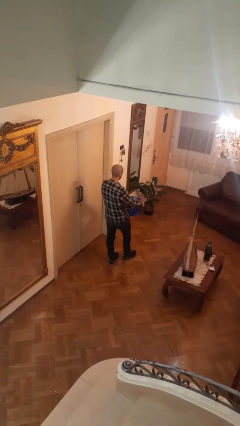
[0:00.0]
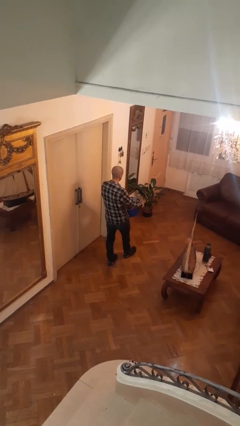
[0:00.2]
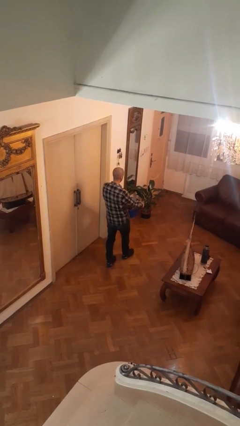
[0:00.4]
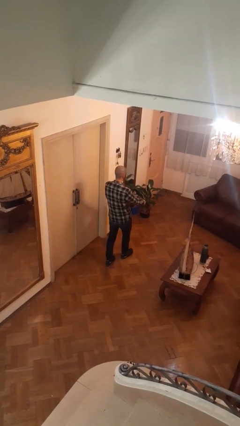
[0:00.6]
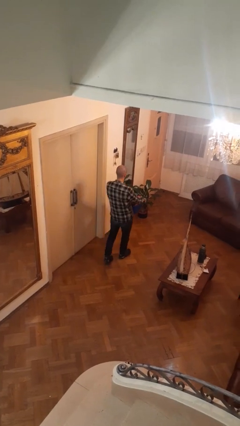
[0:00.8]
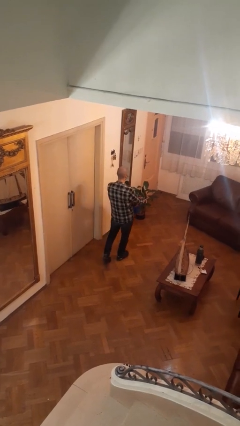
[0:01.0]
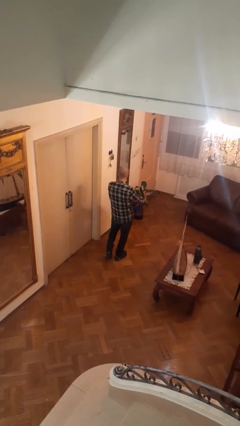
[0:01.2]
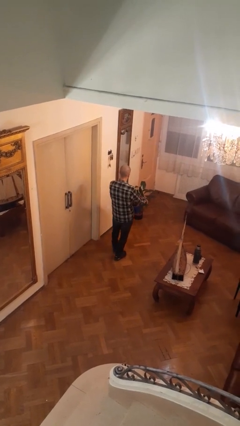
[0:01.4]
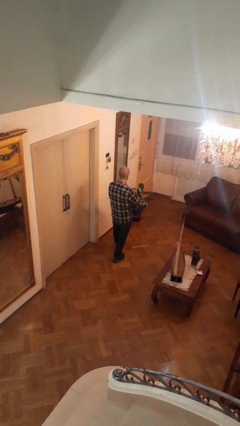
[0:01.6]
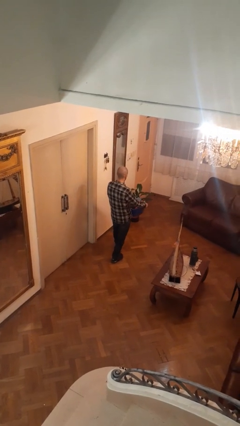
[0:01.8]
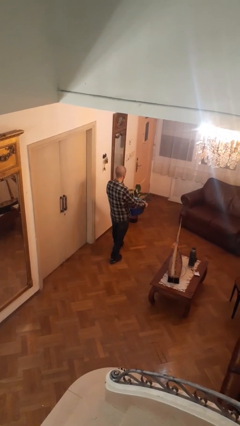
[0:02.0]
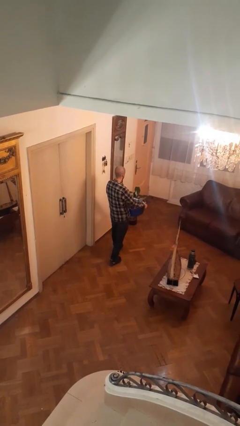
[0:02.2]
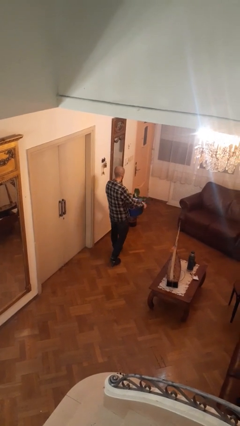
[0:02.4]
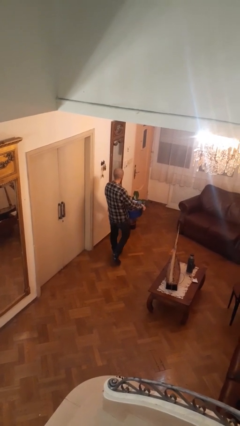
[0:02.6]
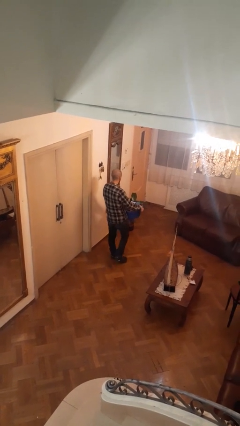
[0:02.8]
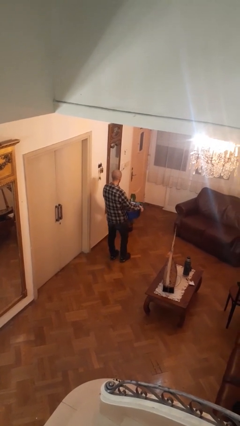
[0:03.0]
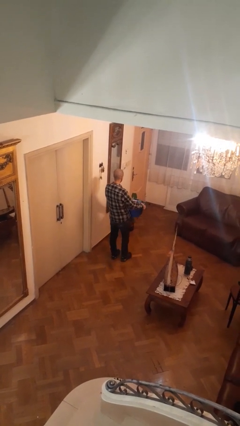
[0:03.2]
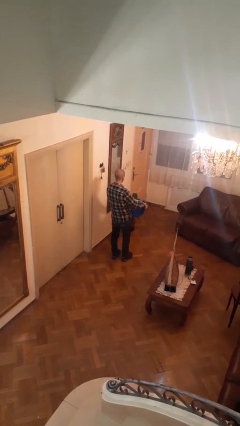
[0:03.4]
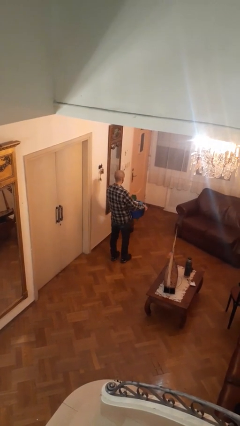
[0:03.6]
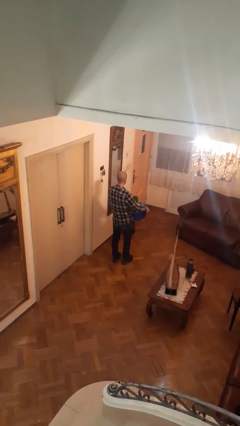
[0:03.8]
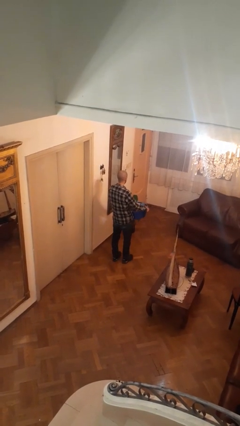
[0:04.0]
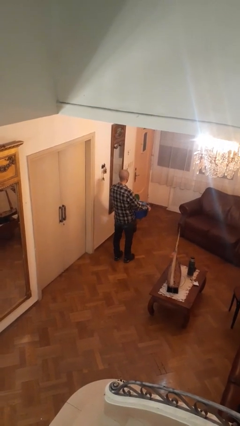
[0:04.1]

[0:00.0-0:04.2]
person carries laundry basket

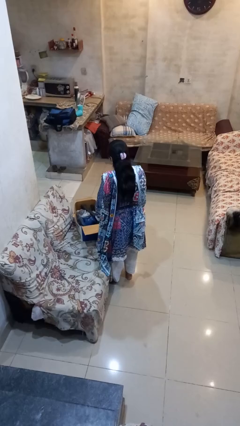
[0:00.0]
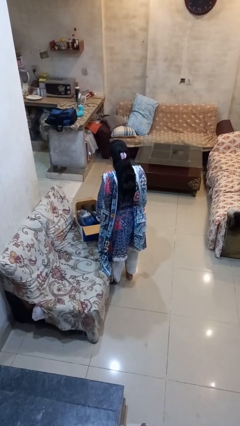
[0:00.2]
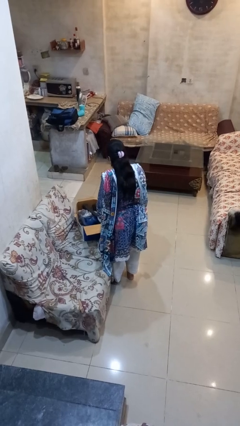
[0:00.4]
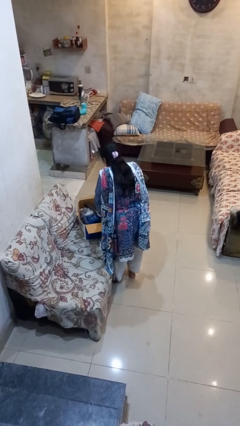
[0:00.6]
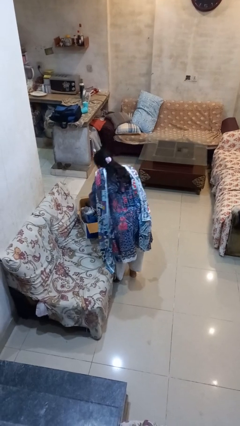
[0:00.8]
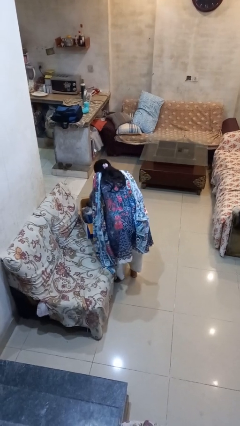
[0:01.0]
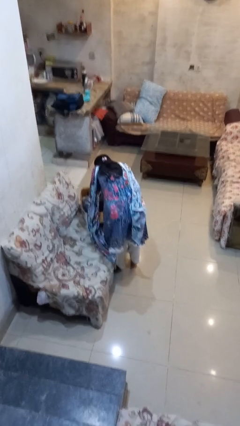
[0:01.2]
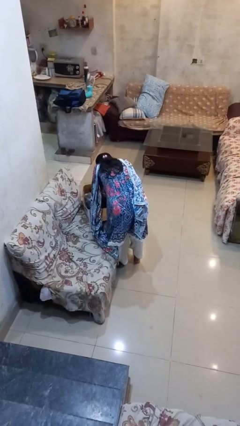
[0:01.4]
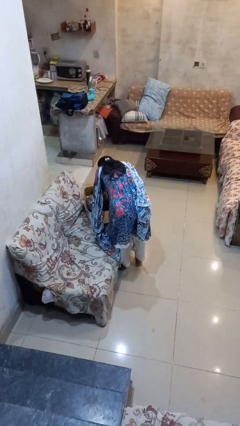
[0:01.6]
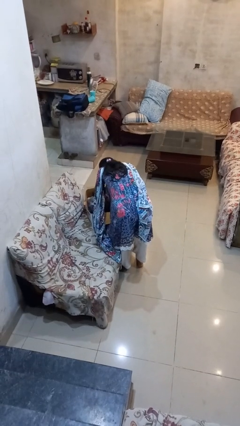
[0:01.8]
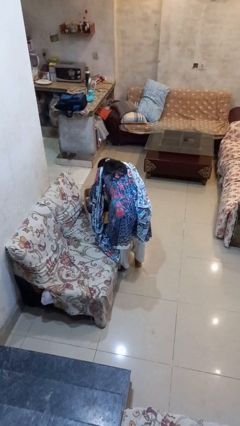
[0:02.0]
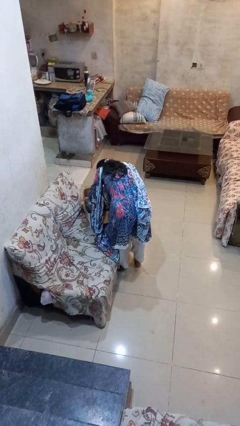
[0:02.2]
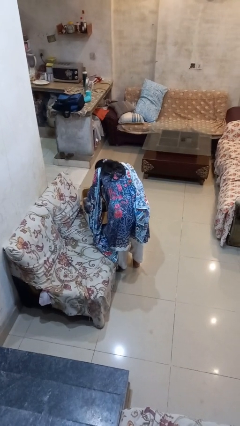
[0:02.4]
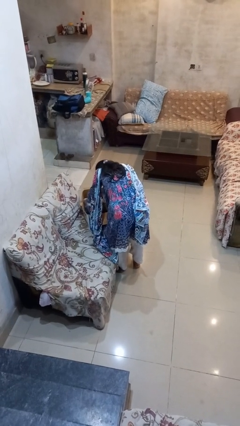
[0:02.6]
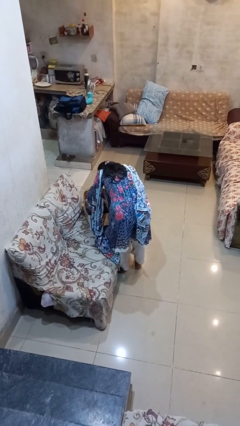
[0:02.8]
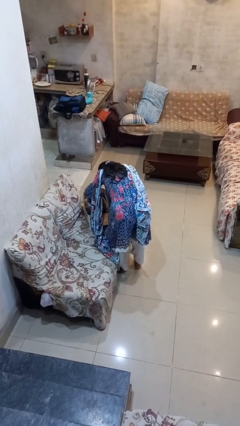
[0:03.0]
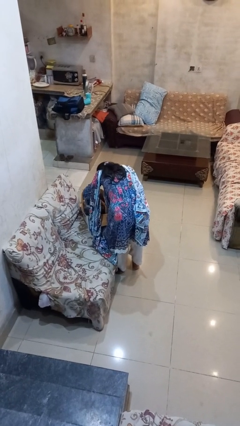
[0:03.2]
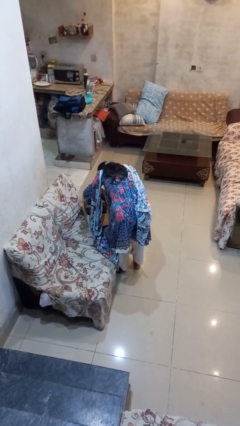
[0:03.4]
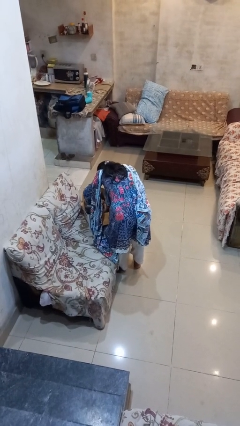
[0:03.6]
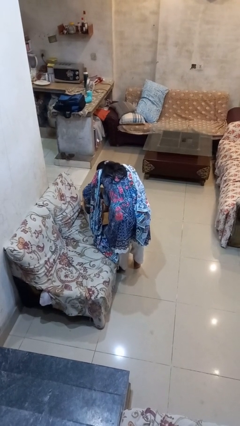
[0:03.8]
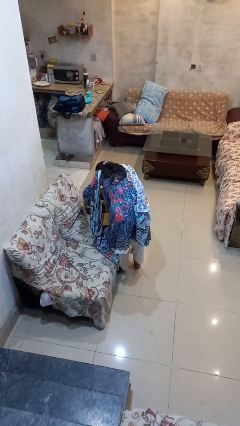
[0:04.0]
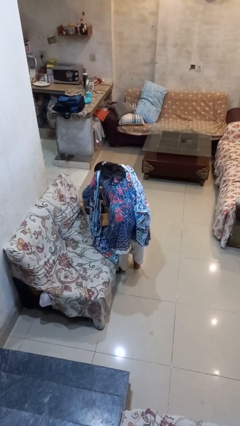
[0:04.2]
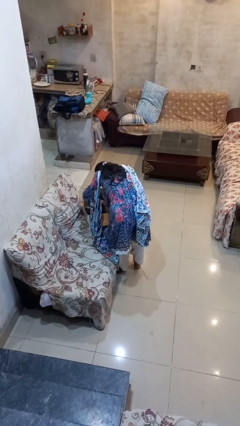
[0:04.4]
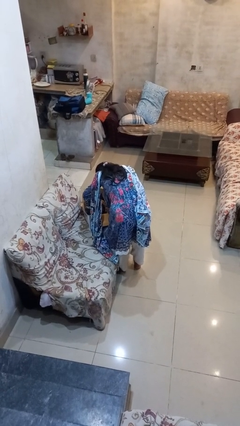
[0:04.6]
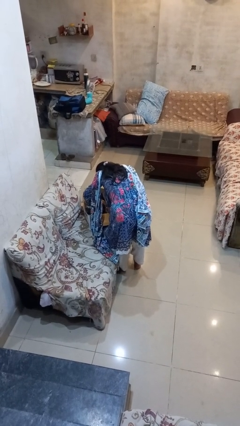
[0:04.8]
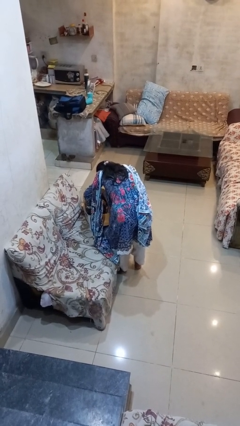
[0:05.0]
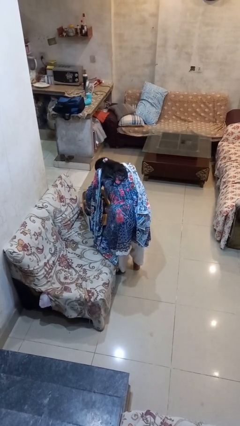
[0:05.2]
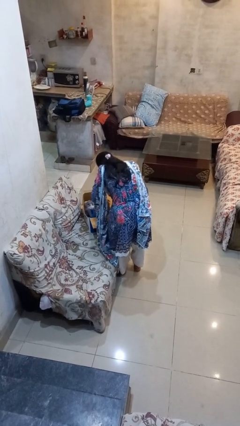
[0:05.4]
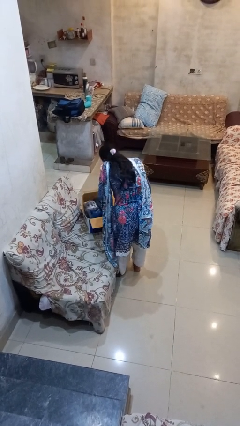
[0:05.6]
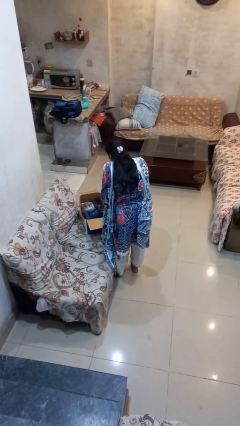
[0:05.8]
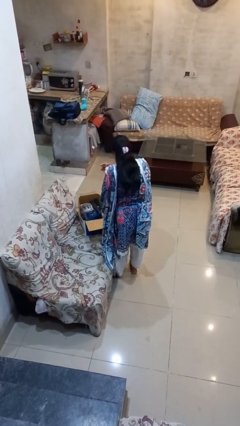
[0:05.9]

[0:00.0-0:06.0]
person searches in box

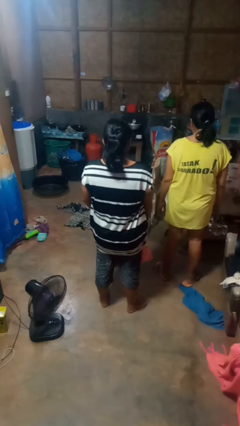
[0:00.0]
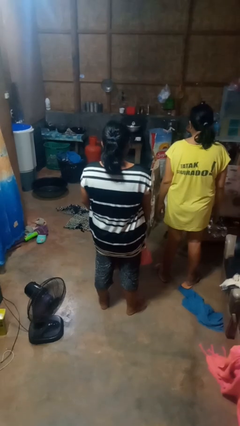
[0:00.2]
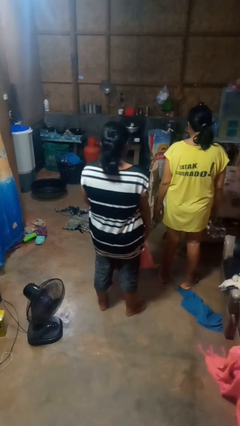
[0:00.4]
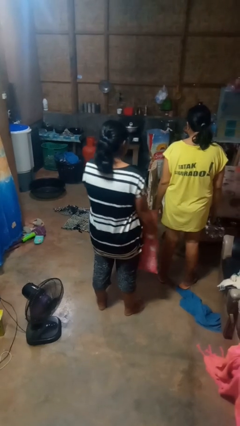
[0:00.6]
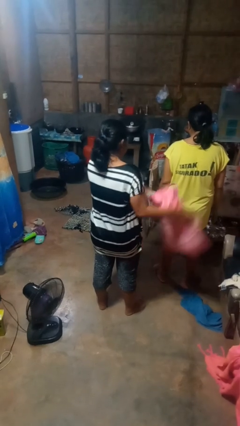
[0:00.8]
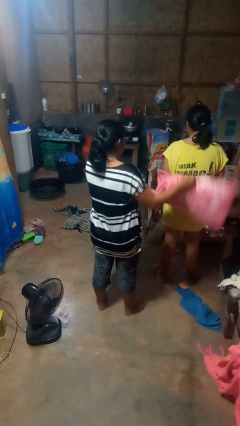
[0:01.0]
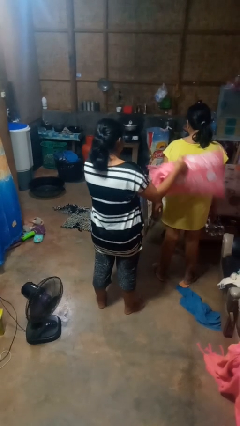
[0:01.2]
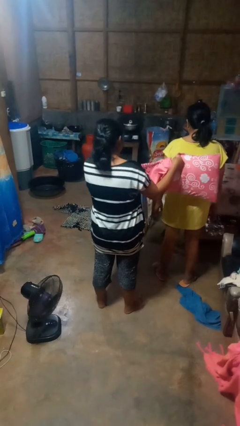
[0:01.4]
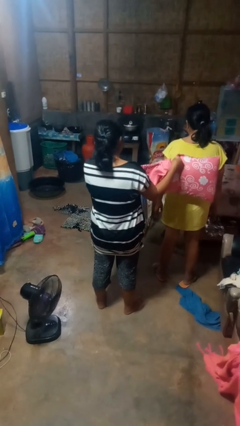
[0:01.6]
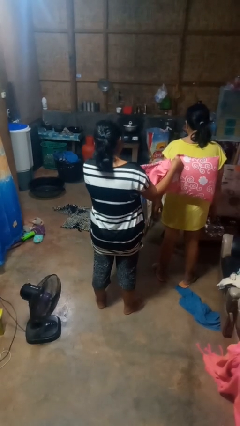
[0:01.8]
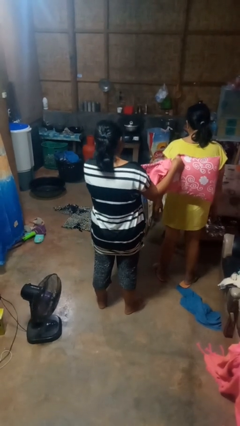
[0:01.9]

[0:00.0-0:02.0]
person hits person with pillow

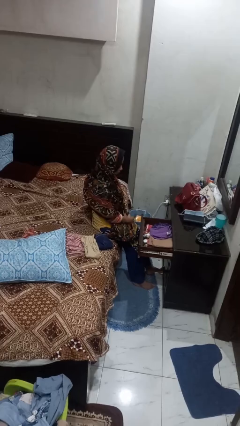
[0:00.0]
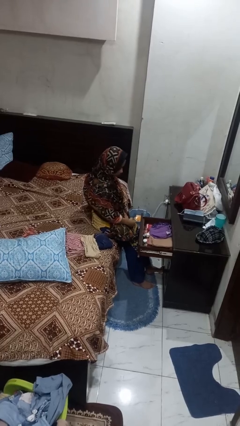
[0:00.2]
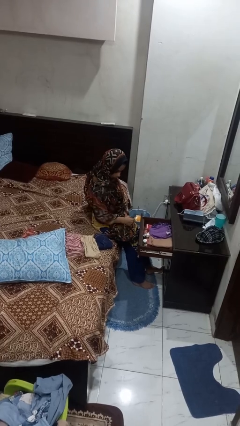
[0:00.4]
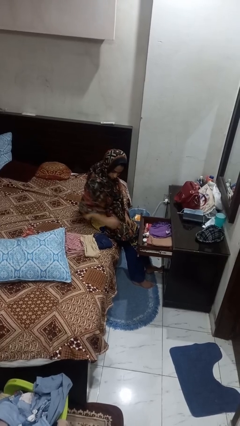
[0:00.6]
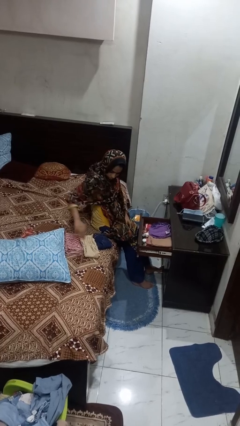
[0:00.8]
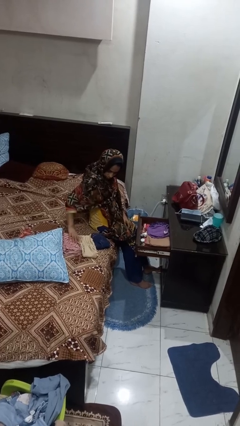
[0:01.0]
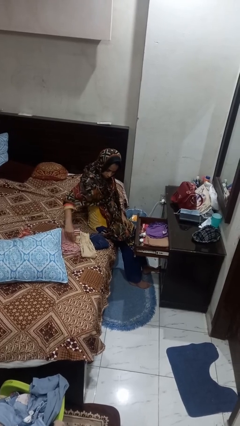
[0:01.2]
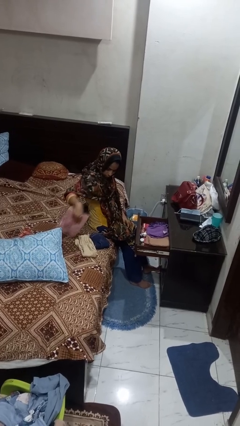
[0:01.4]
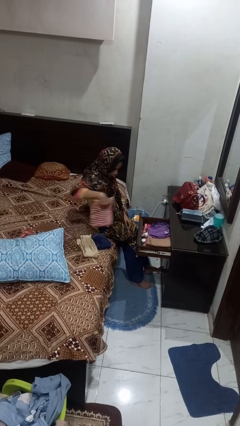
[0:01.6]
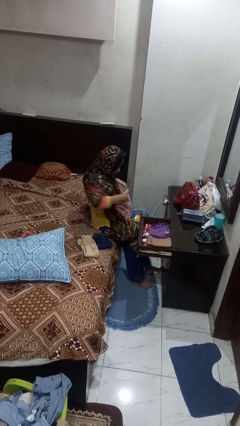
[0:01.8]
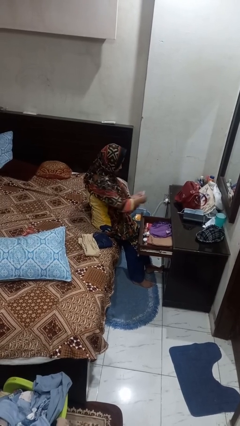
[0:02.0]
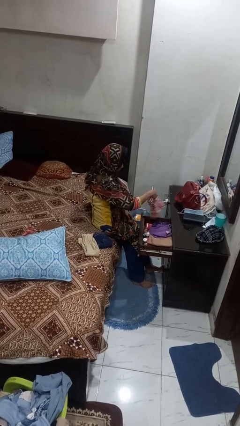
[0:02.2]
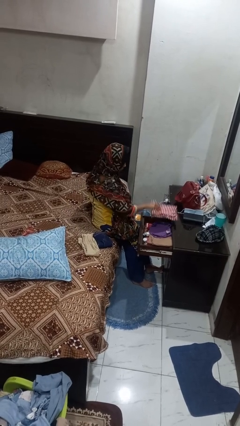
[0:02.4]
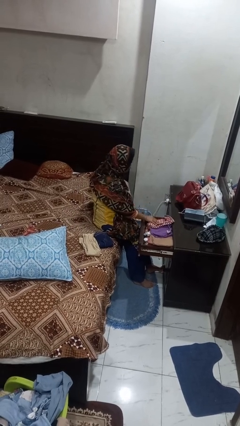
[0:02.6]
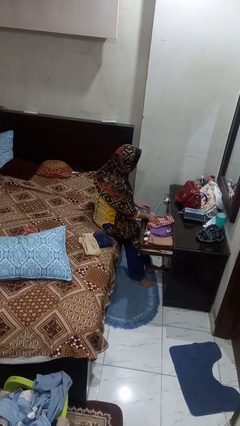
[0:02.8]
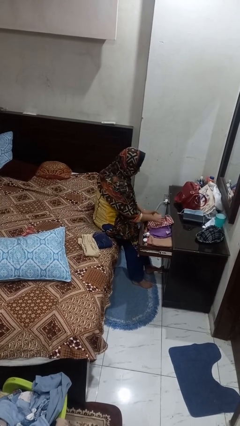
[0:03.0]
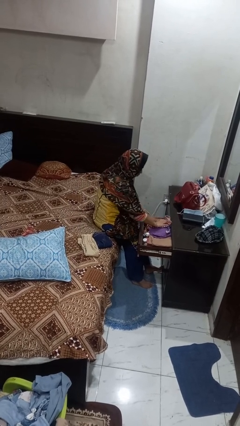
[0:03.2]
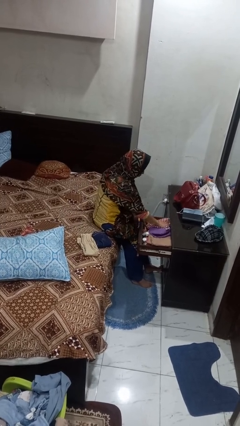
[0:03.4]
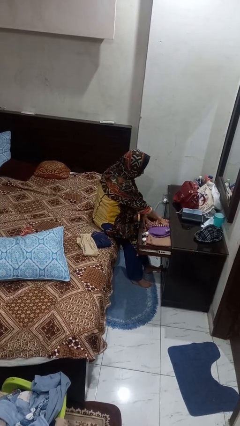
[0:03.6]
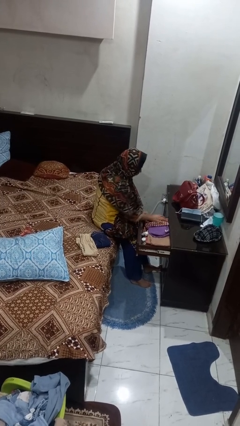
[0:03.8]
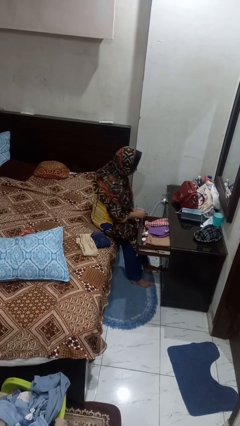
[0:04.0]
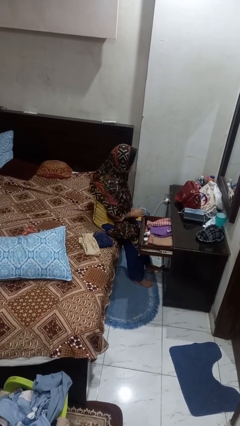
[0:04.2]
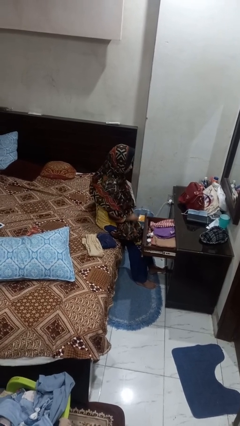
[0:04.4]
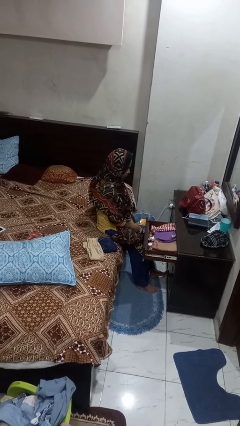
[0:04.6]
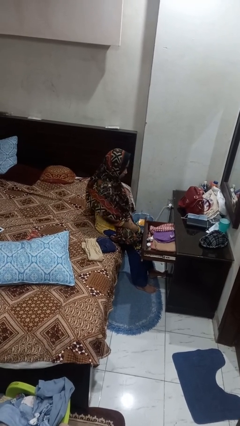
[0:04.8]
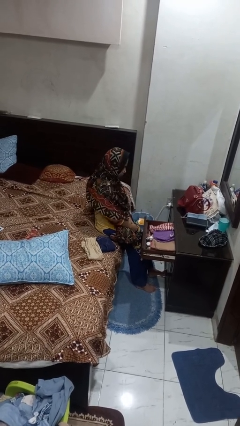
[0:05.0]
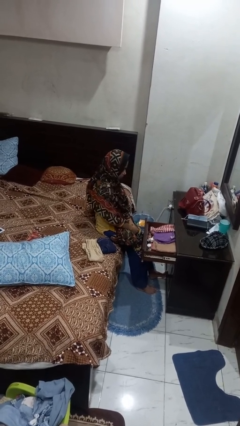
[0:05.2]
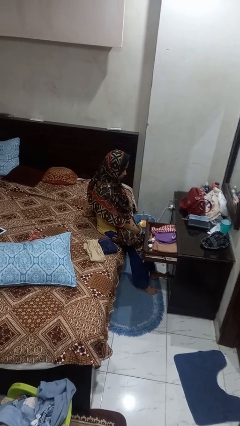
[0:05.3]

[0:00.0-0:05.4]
person puts clothes into dresser

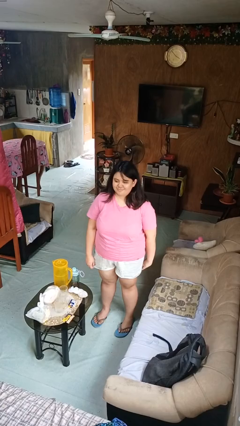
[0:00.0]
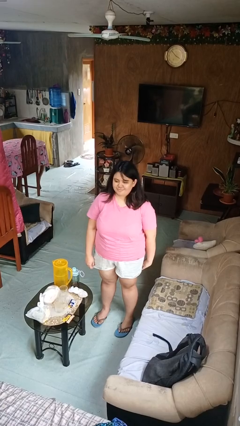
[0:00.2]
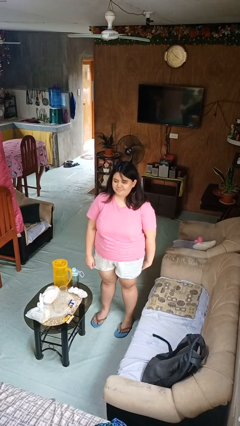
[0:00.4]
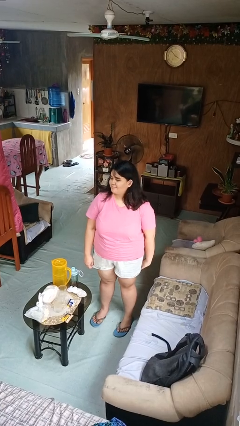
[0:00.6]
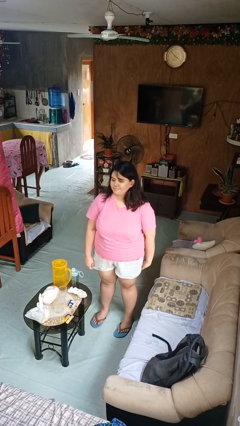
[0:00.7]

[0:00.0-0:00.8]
person shakes head
